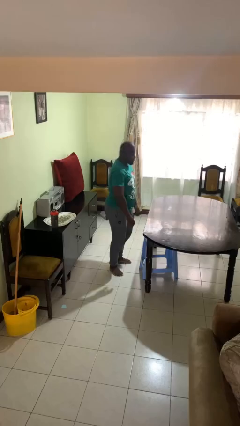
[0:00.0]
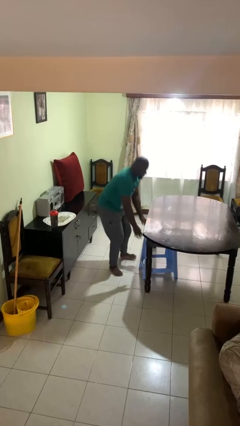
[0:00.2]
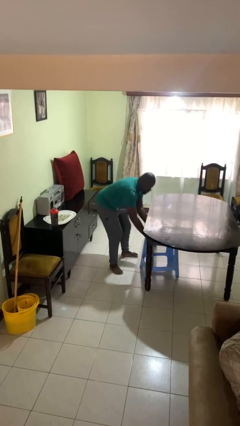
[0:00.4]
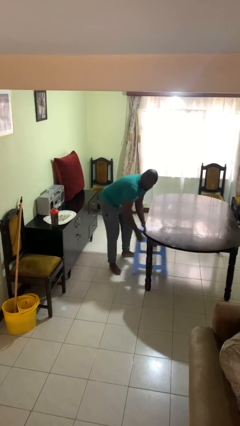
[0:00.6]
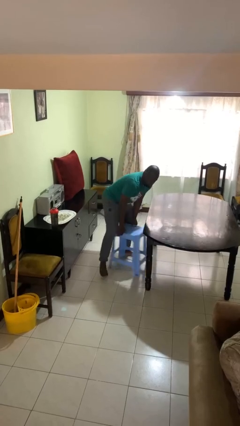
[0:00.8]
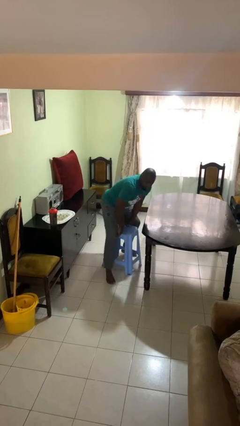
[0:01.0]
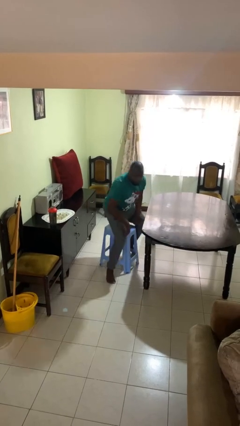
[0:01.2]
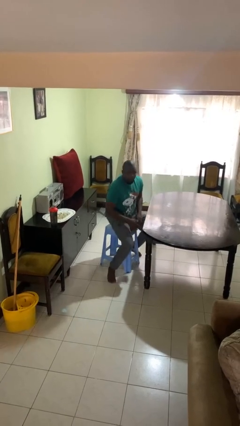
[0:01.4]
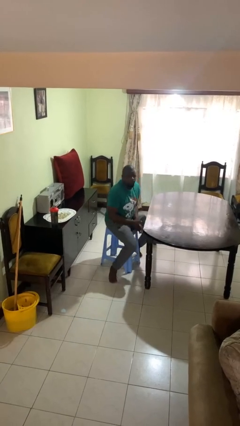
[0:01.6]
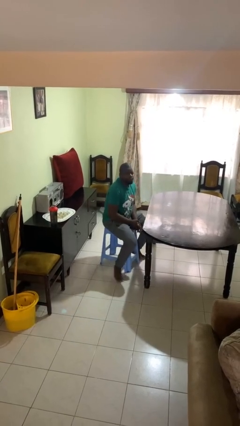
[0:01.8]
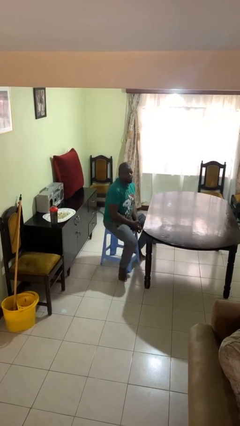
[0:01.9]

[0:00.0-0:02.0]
person sits down

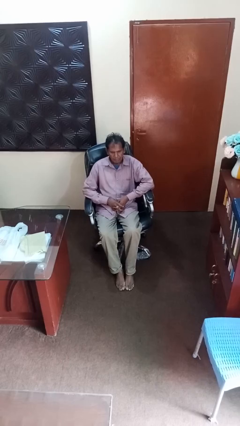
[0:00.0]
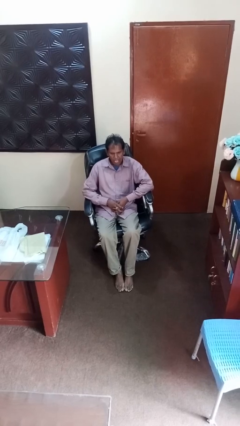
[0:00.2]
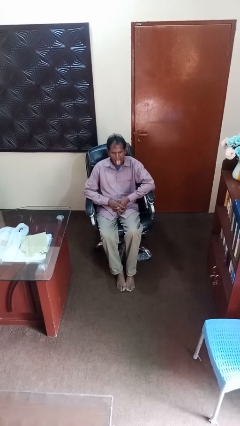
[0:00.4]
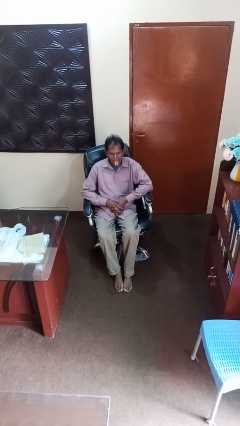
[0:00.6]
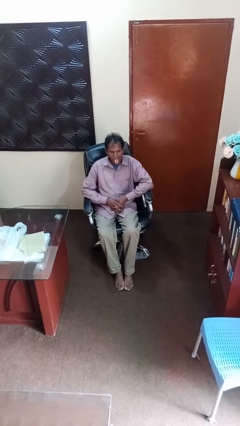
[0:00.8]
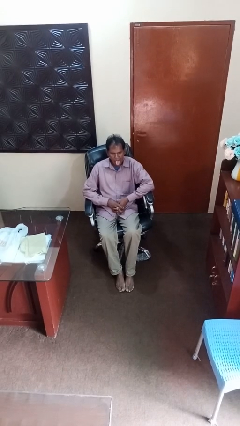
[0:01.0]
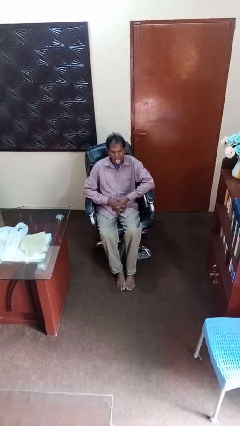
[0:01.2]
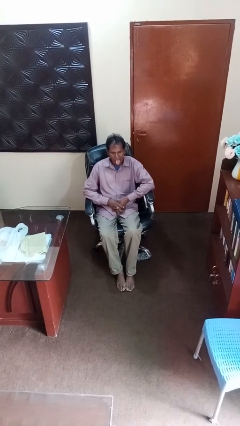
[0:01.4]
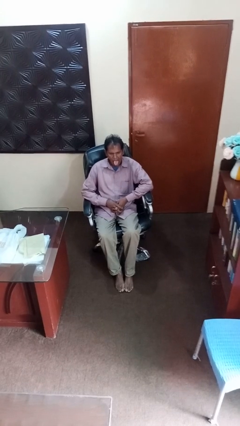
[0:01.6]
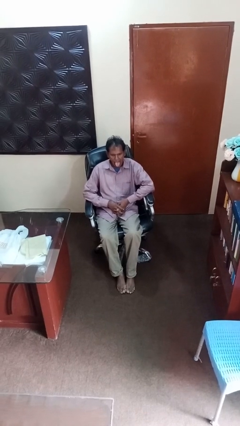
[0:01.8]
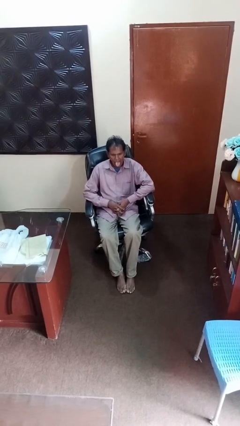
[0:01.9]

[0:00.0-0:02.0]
person sticks out tongue

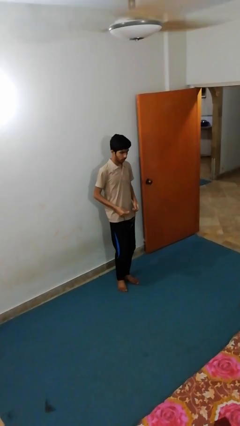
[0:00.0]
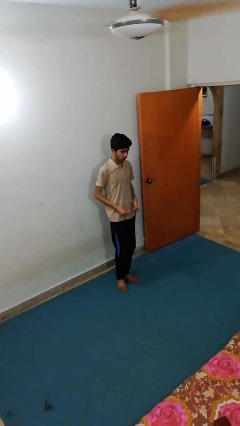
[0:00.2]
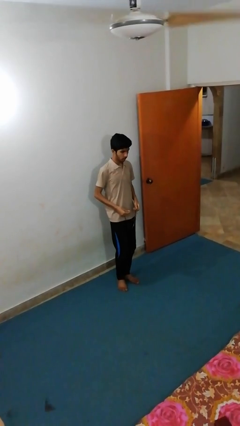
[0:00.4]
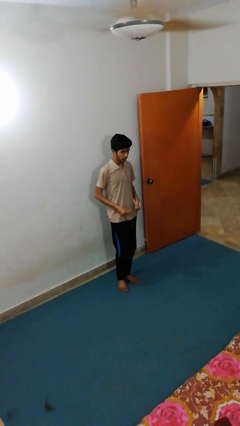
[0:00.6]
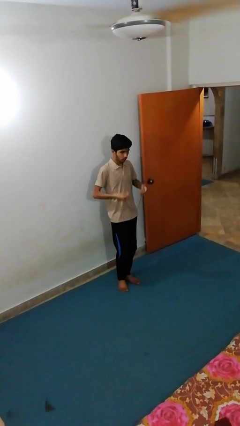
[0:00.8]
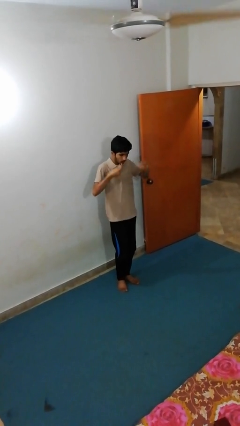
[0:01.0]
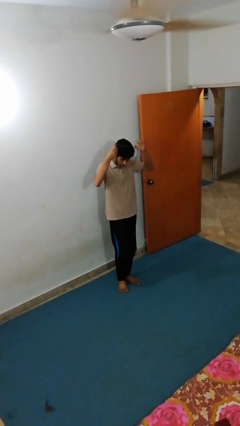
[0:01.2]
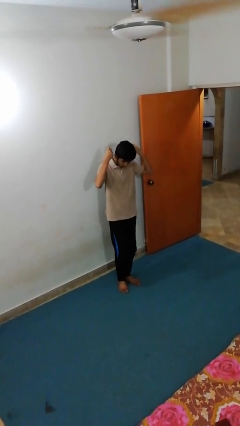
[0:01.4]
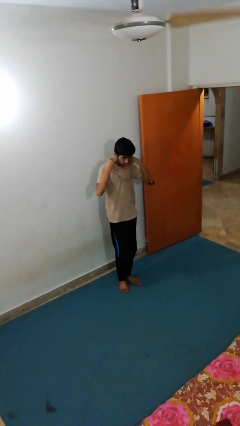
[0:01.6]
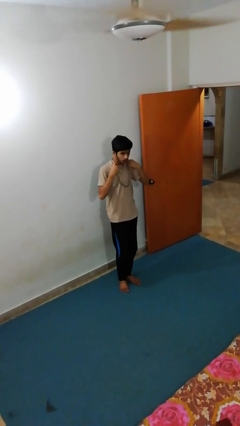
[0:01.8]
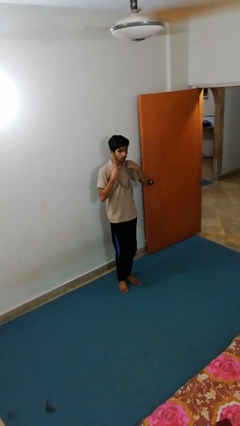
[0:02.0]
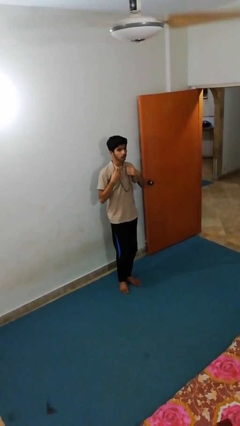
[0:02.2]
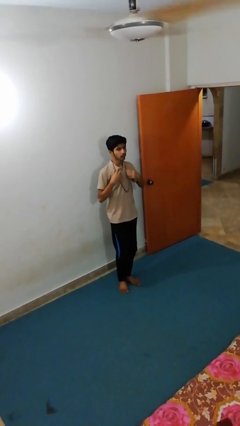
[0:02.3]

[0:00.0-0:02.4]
person puts on necklace

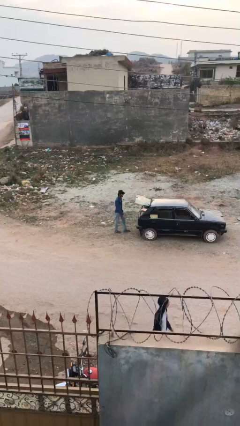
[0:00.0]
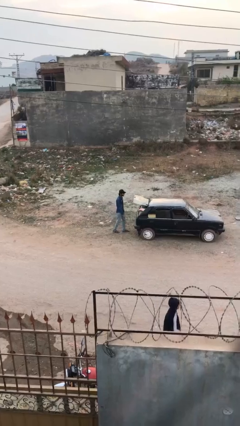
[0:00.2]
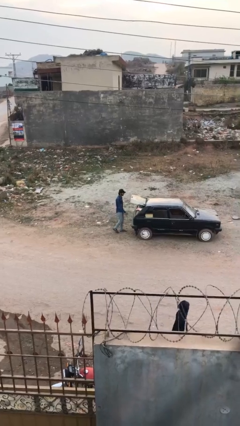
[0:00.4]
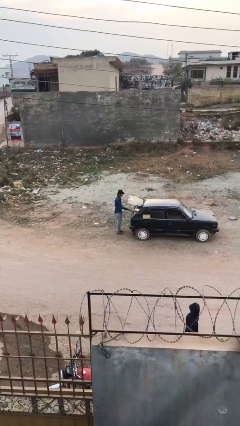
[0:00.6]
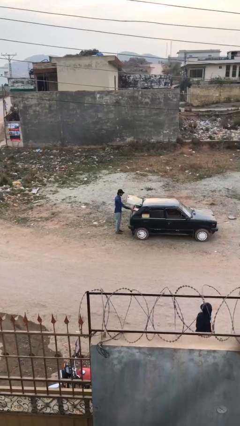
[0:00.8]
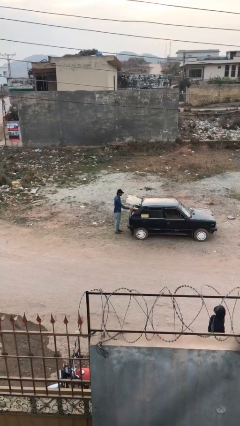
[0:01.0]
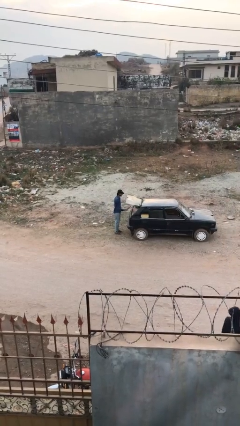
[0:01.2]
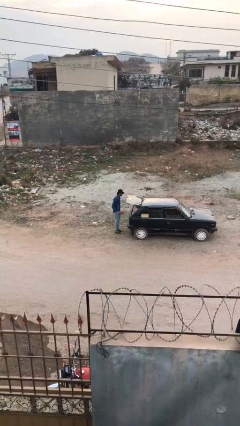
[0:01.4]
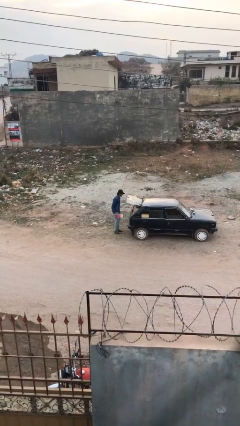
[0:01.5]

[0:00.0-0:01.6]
person unloads car

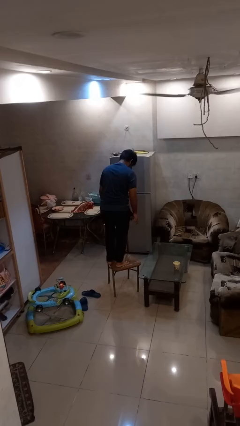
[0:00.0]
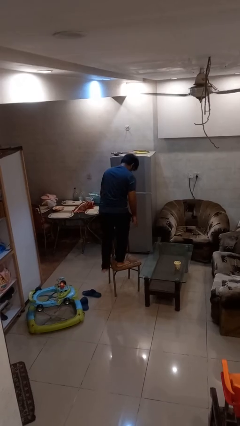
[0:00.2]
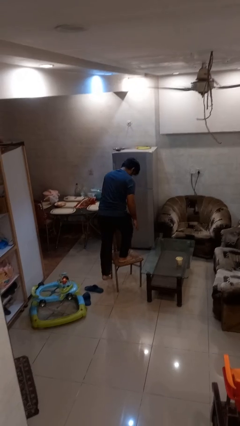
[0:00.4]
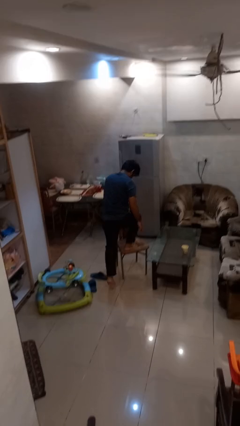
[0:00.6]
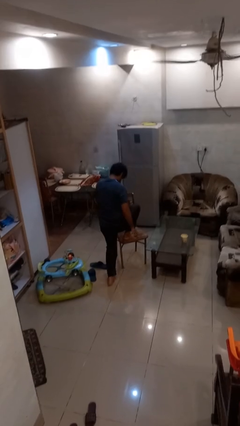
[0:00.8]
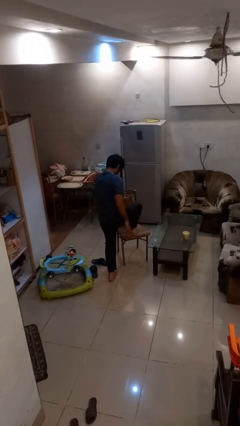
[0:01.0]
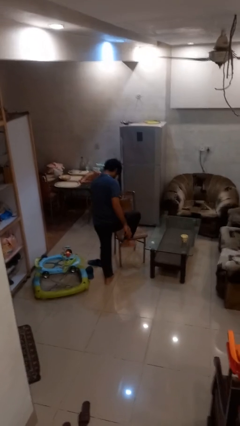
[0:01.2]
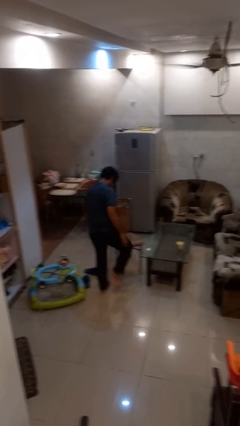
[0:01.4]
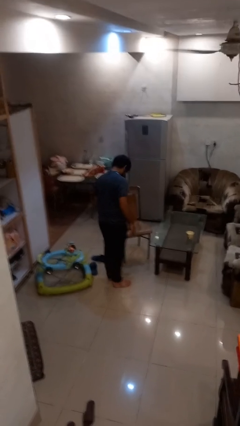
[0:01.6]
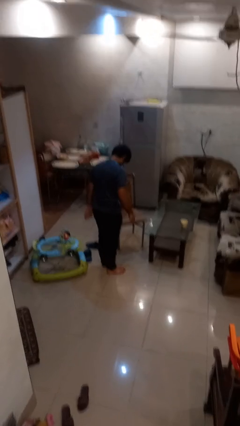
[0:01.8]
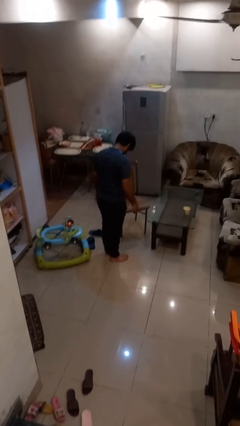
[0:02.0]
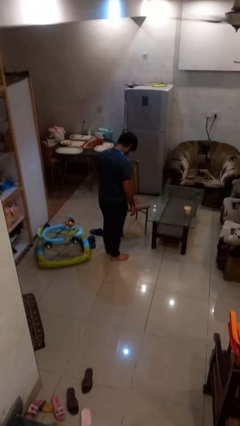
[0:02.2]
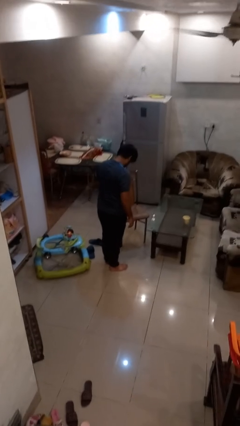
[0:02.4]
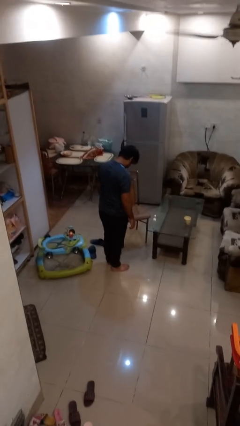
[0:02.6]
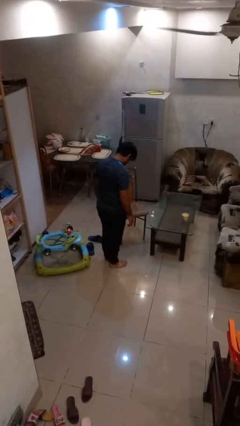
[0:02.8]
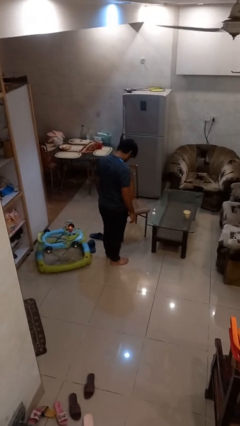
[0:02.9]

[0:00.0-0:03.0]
person climbs off chair

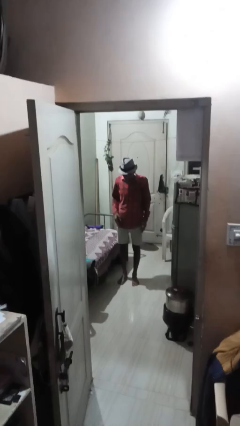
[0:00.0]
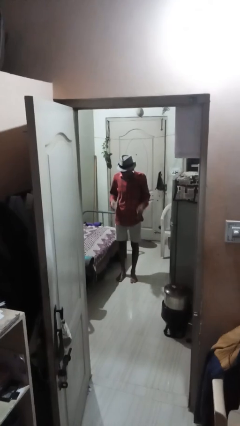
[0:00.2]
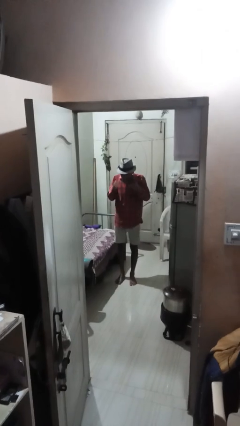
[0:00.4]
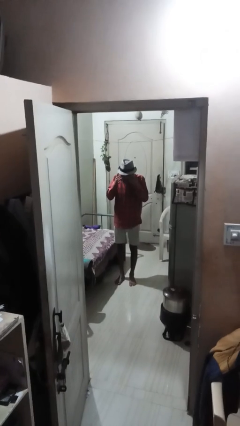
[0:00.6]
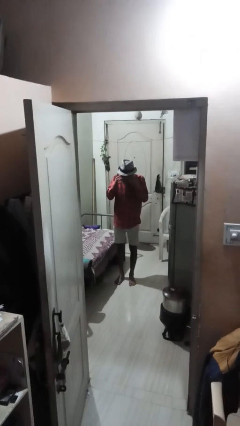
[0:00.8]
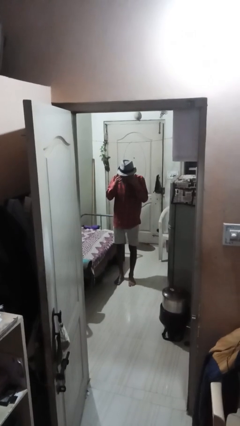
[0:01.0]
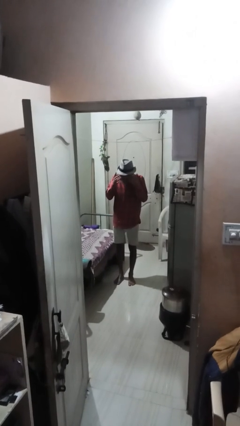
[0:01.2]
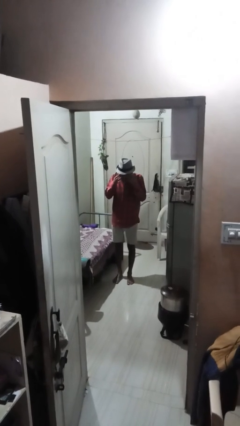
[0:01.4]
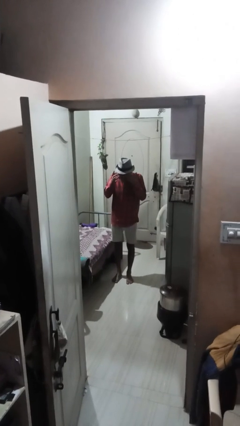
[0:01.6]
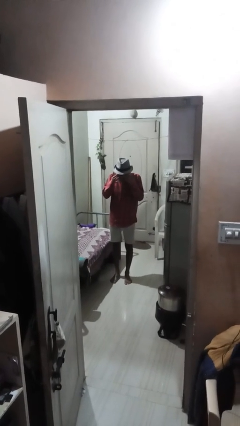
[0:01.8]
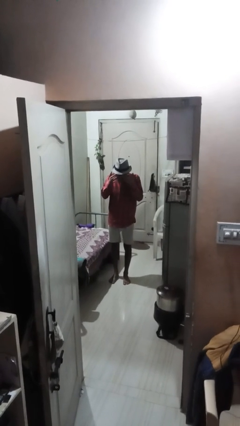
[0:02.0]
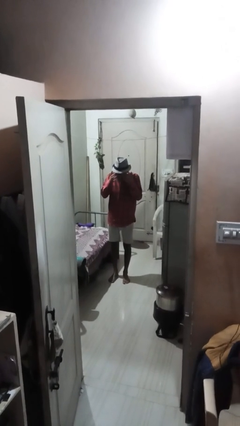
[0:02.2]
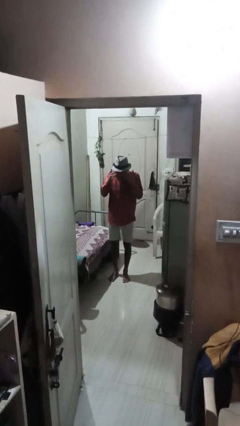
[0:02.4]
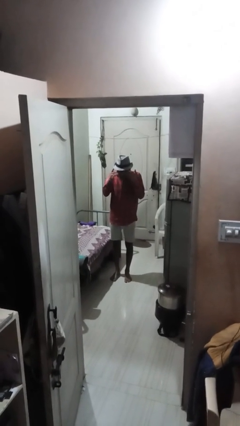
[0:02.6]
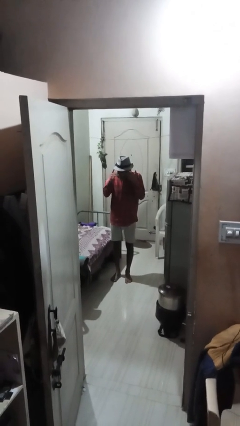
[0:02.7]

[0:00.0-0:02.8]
person rubs eyes
